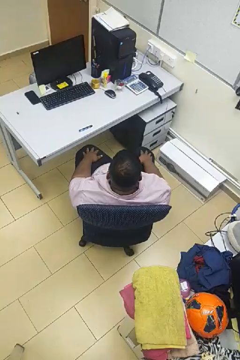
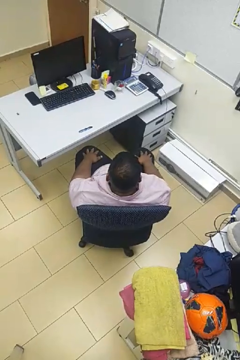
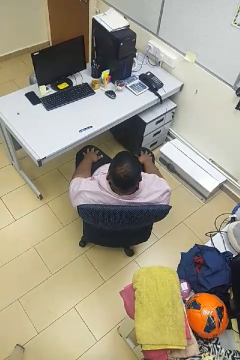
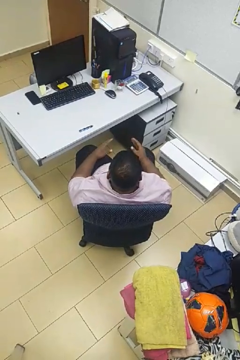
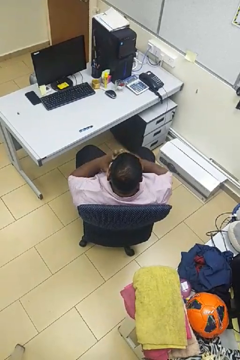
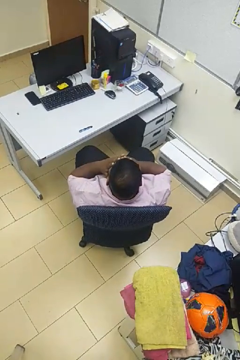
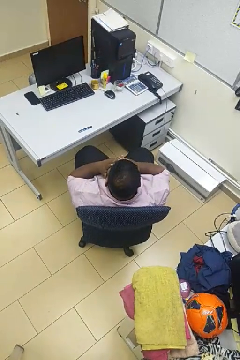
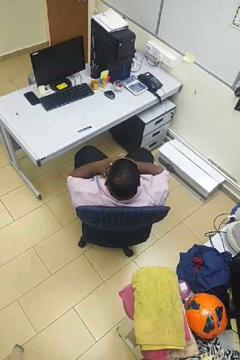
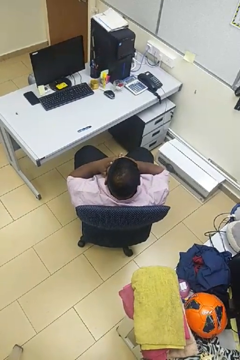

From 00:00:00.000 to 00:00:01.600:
person covers face with hands

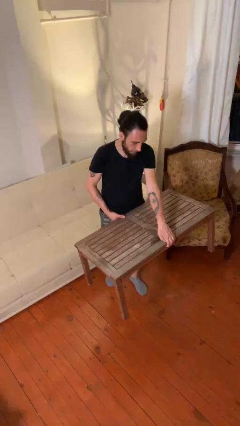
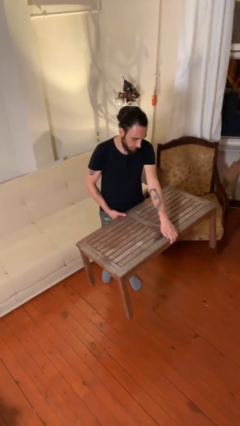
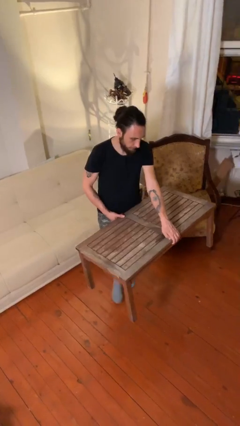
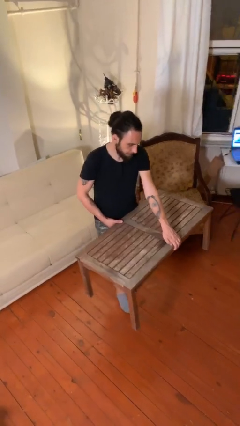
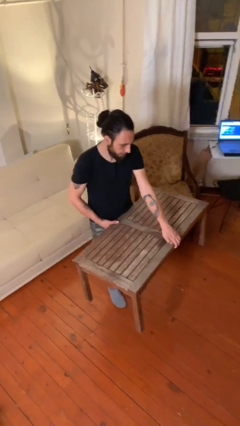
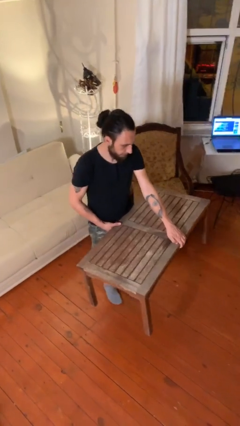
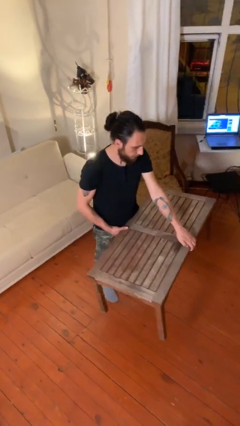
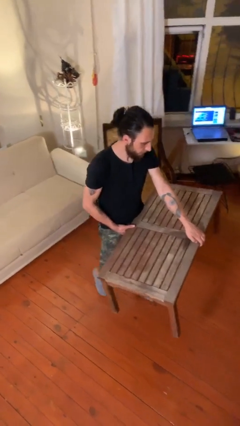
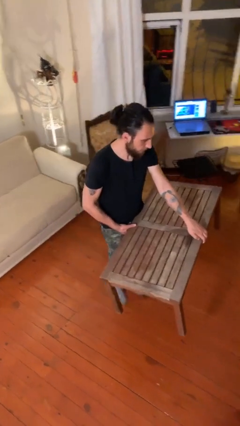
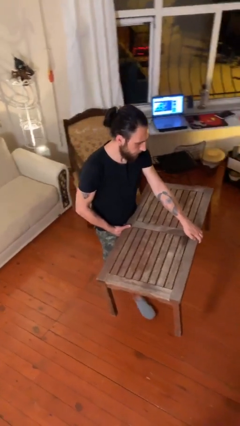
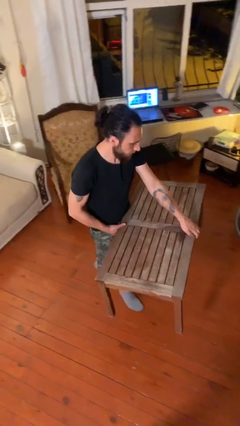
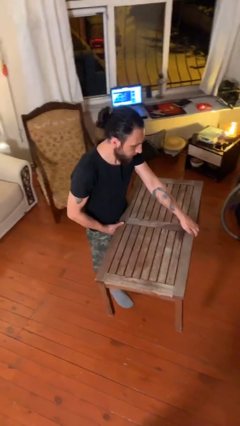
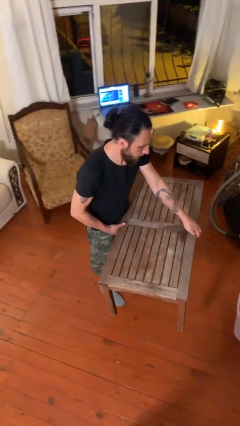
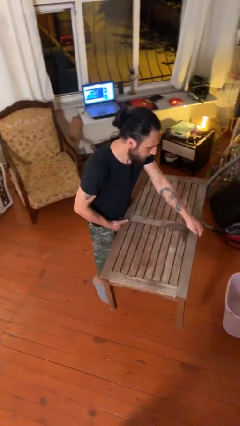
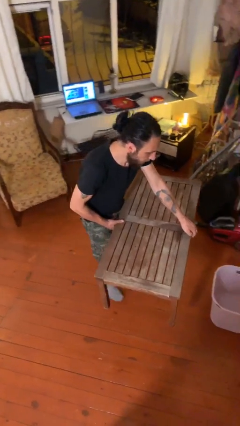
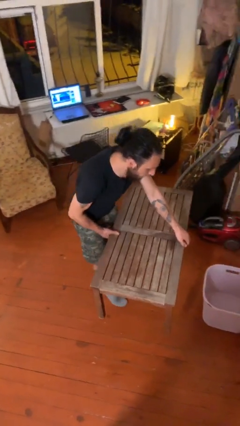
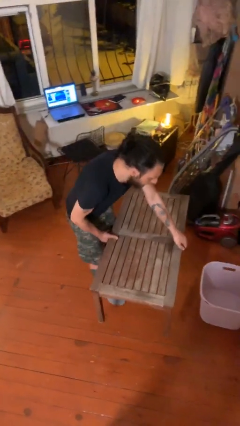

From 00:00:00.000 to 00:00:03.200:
person carries heavy object

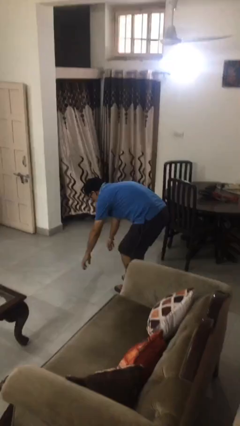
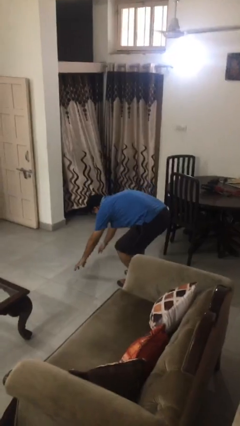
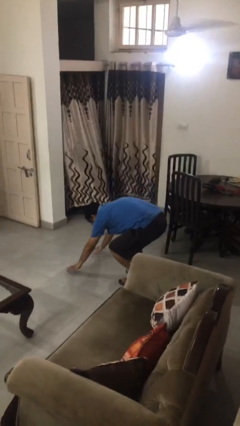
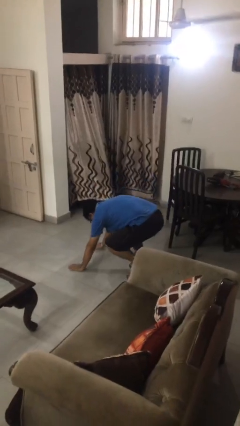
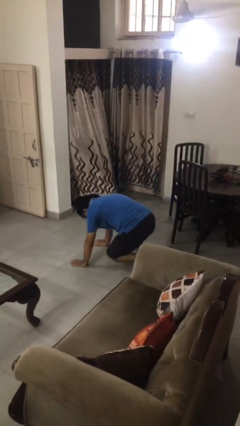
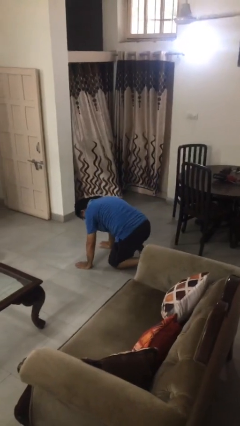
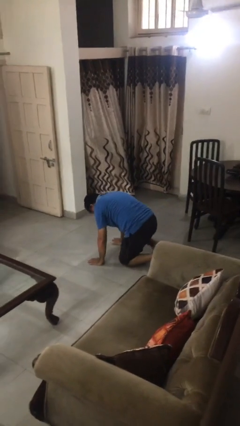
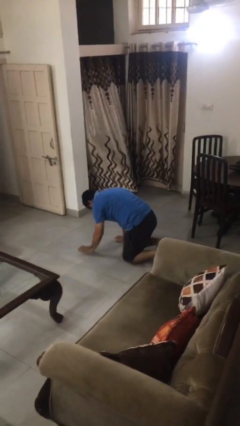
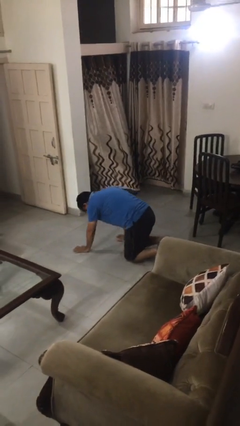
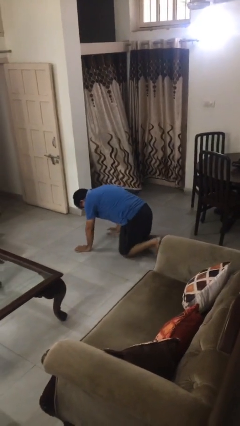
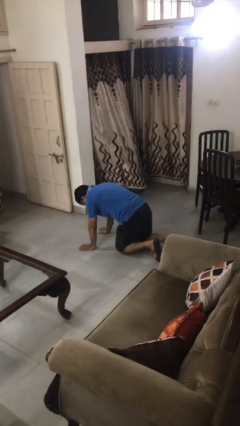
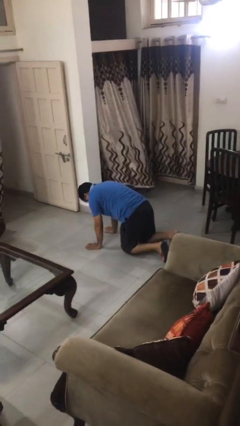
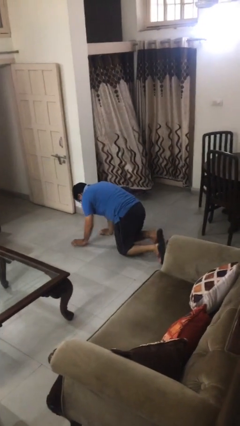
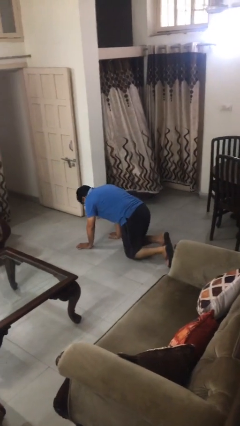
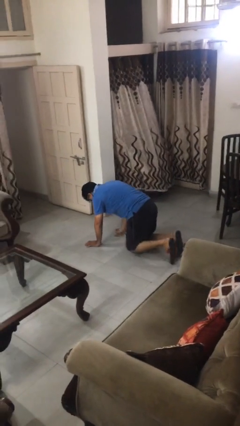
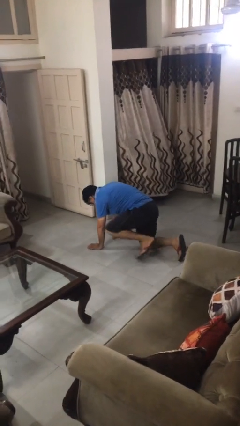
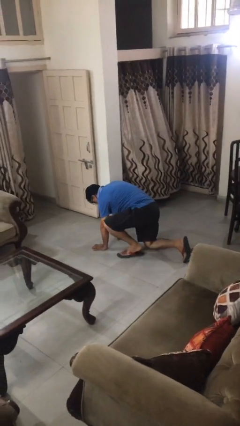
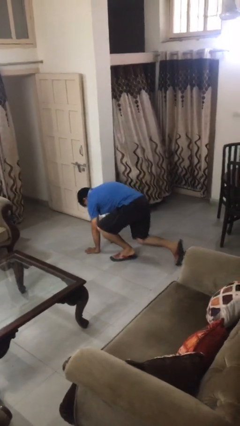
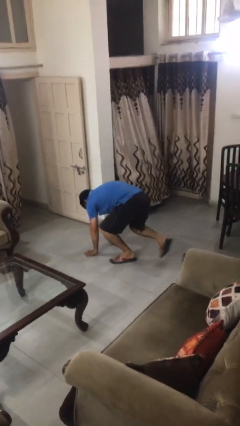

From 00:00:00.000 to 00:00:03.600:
person crawls

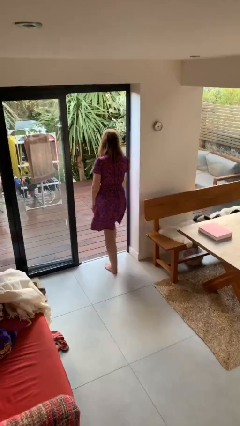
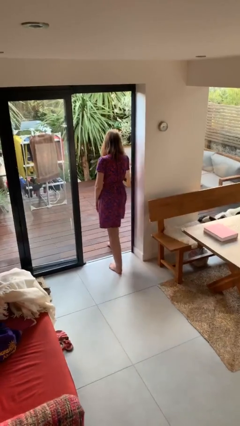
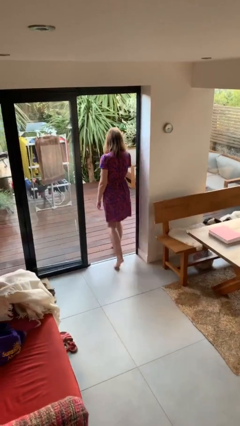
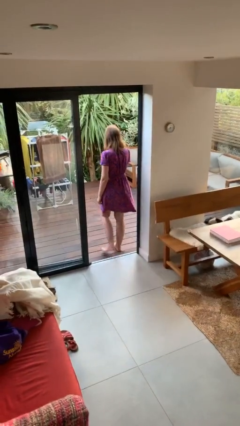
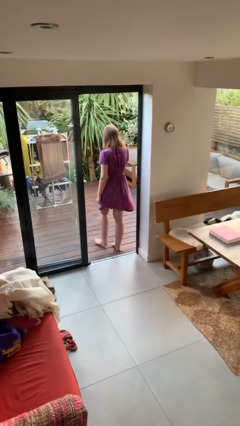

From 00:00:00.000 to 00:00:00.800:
person exits scene through structure

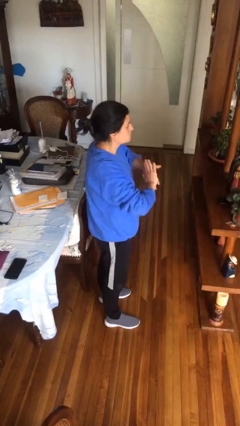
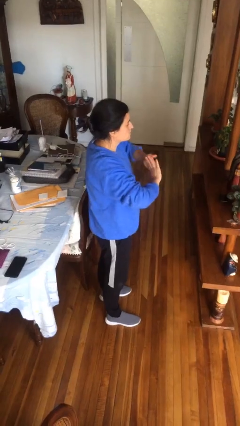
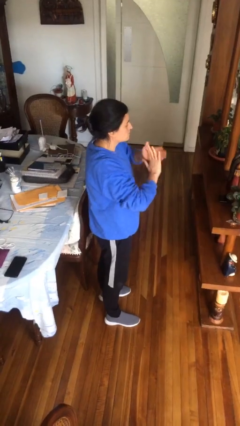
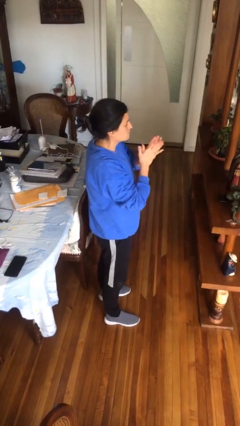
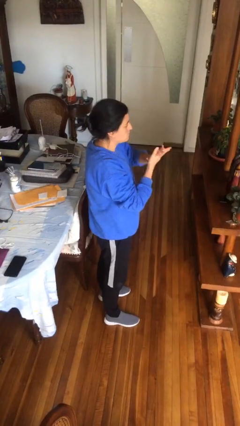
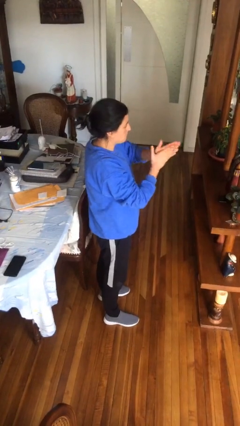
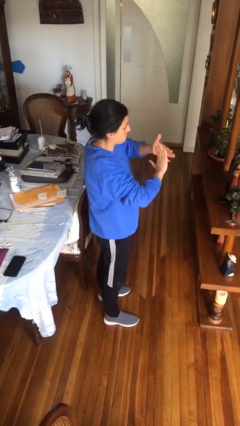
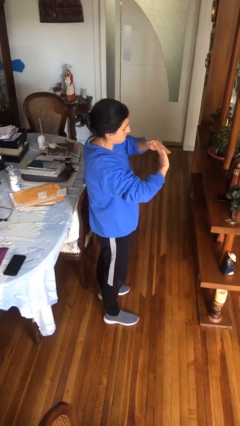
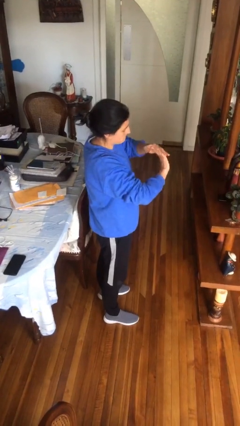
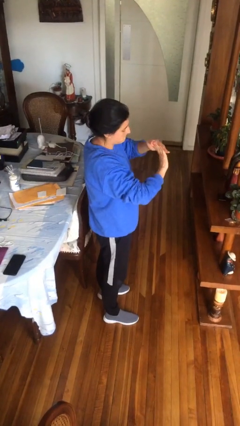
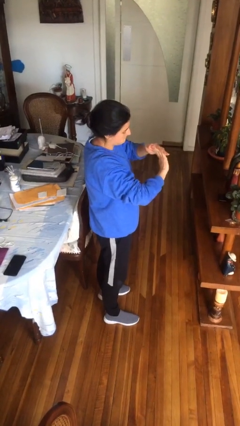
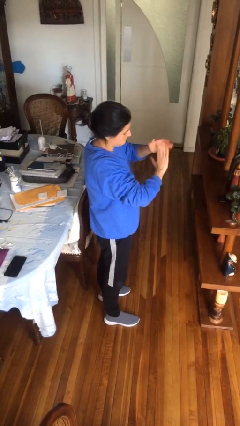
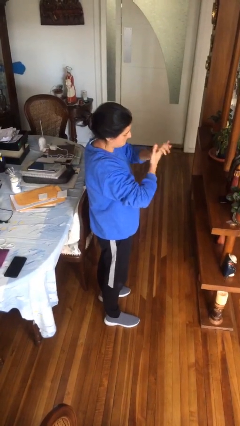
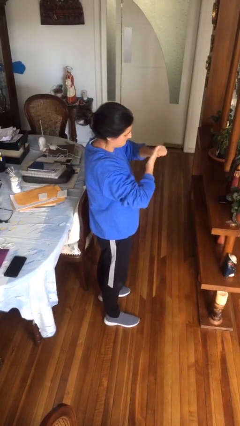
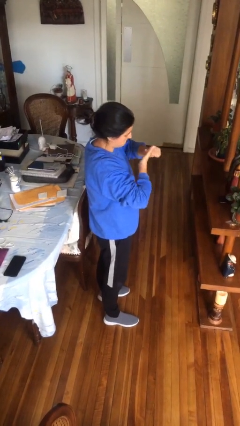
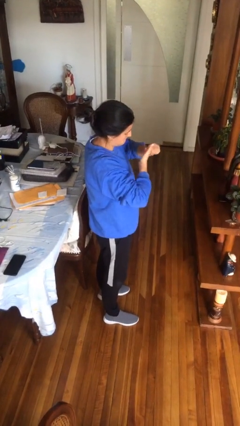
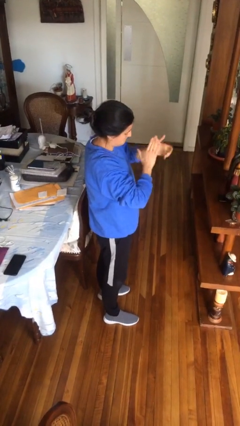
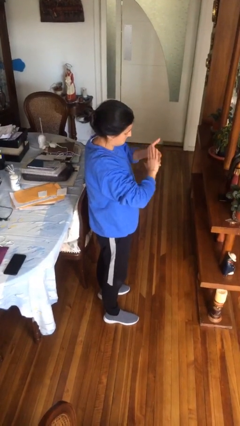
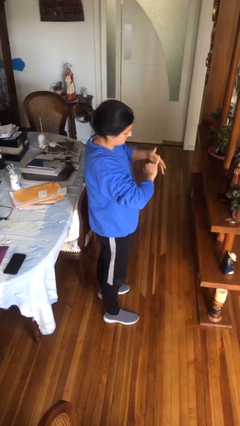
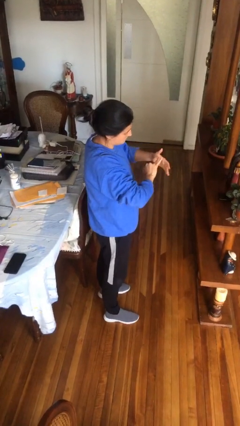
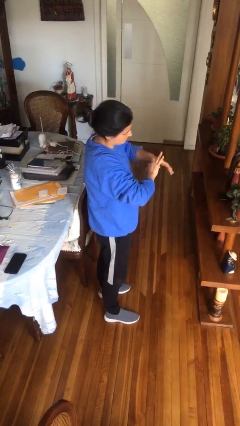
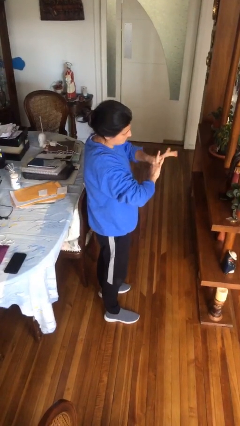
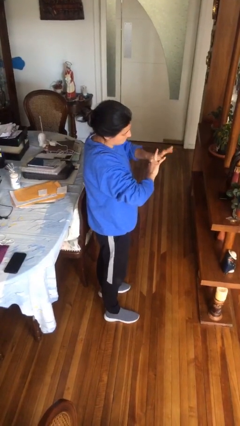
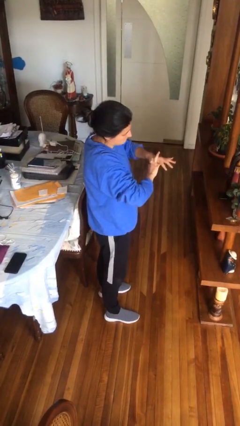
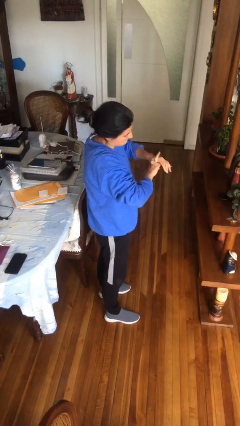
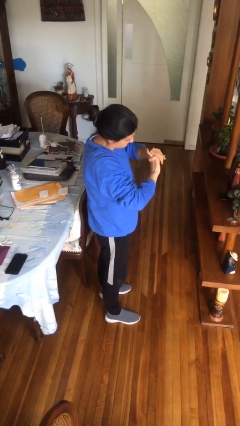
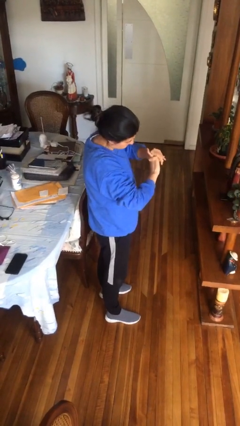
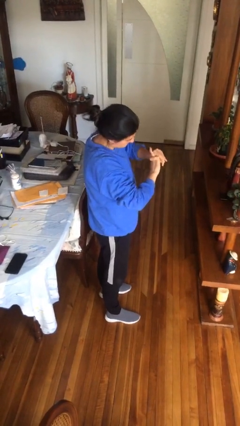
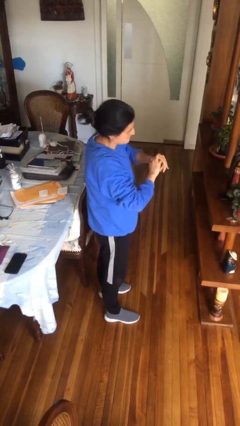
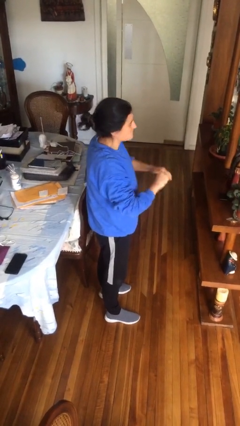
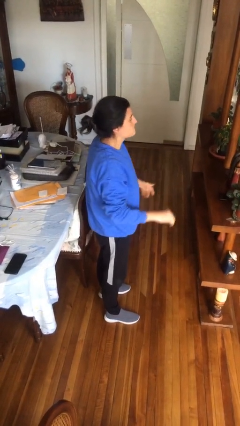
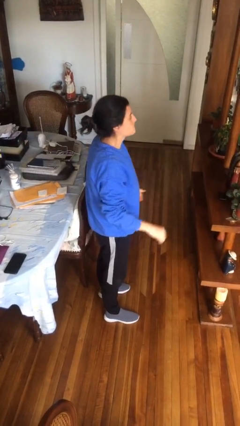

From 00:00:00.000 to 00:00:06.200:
person cracks knuckles

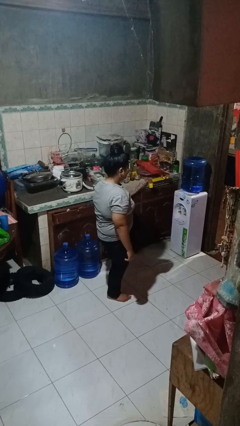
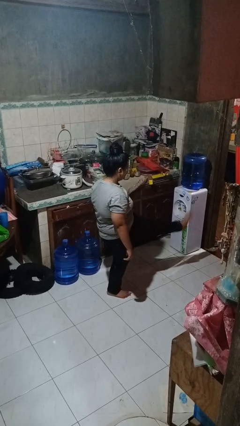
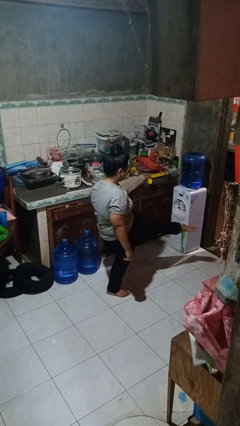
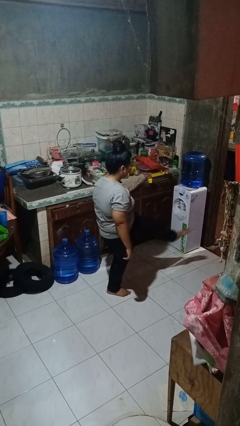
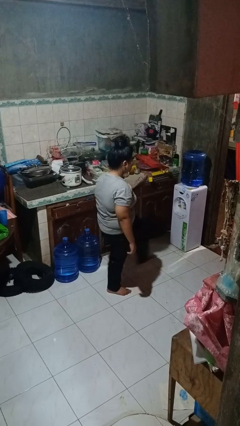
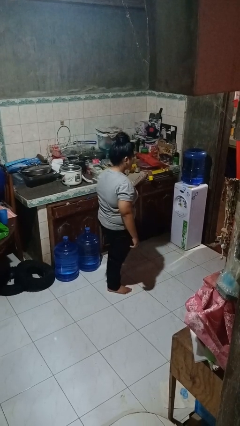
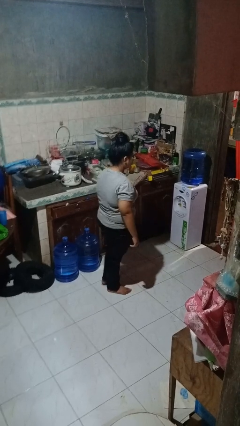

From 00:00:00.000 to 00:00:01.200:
person karate kicks

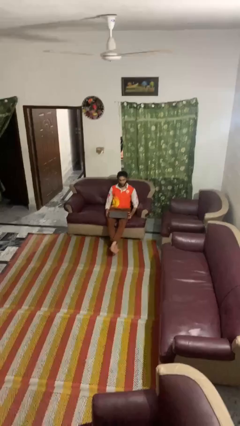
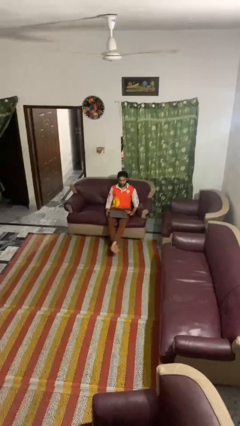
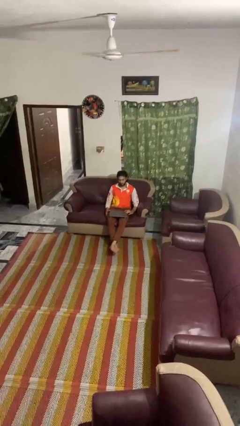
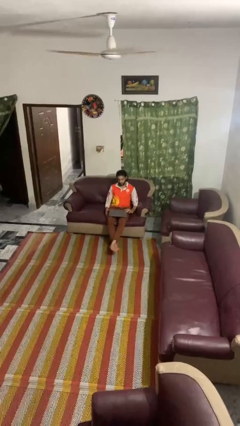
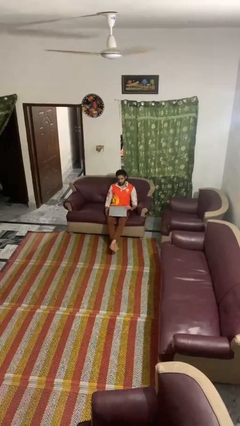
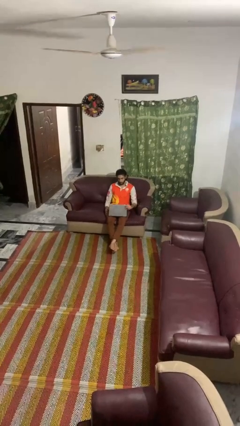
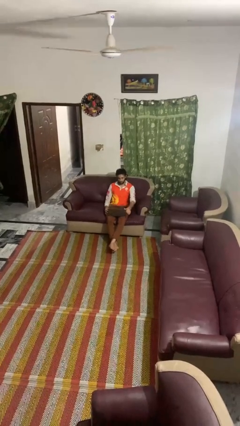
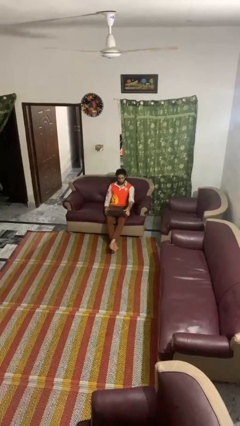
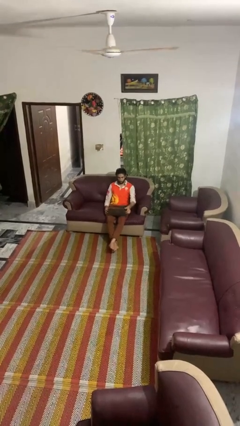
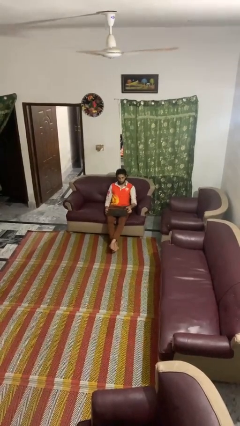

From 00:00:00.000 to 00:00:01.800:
person opens laptop
